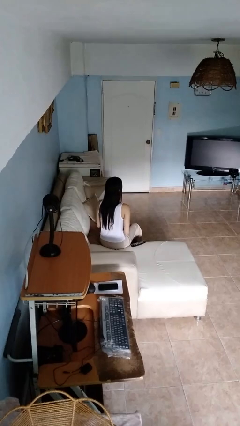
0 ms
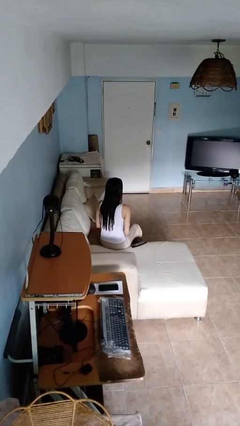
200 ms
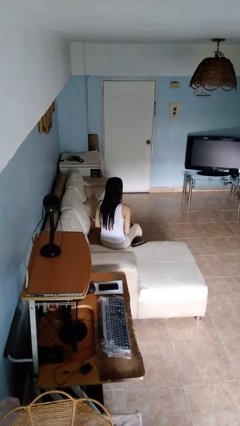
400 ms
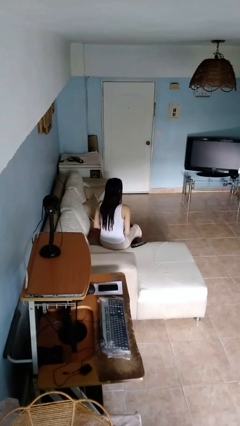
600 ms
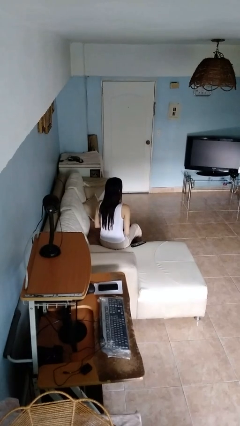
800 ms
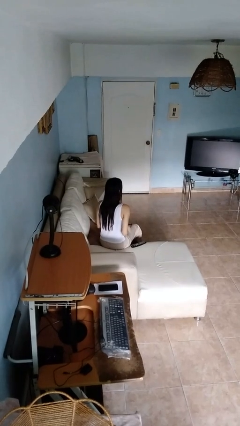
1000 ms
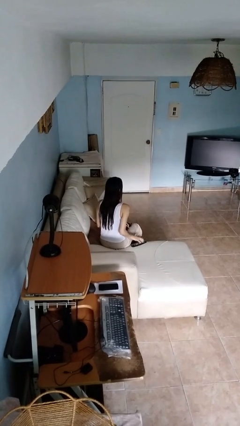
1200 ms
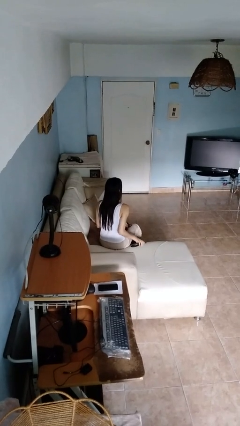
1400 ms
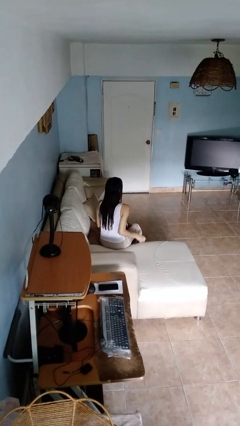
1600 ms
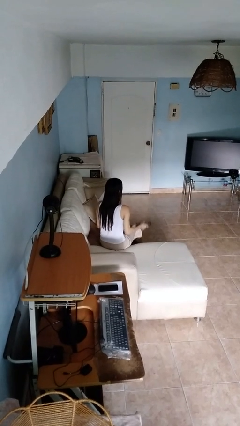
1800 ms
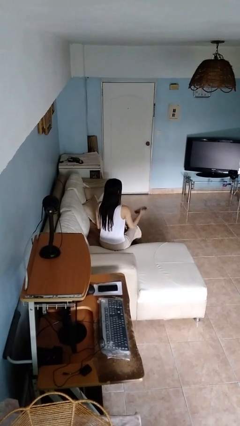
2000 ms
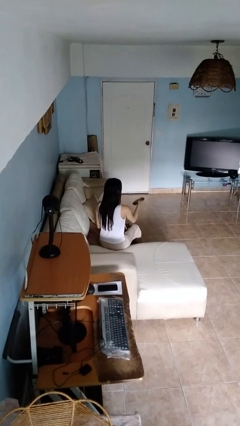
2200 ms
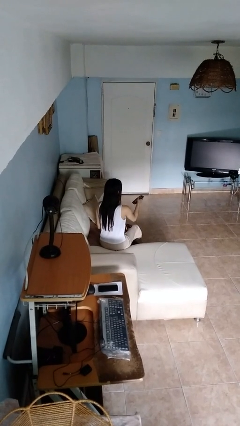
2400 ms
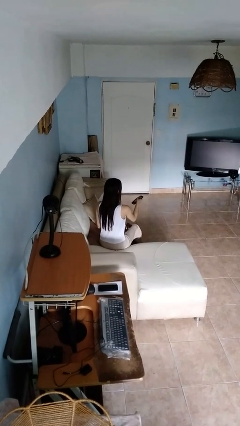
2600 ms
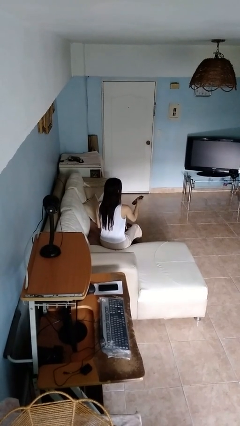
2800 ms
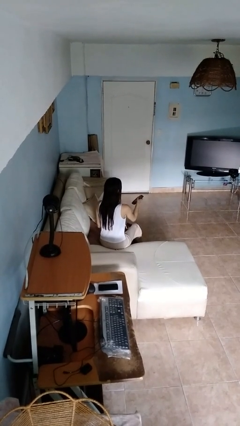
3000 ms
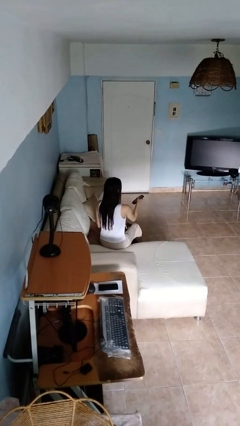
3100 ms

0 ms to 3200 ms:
person uses television remote

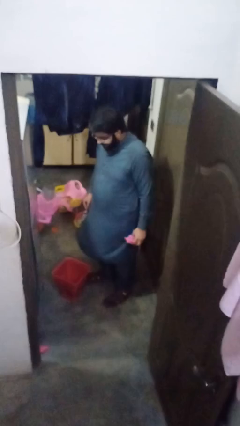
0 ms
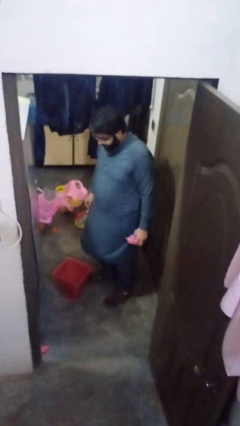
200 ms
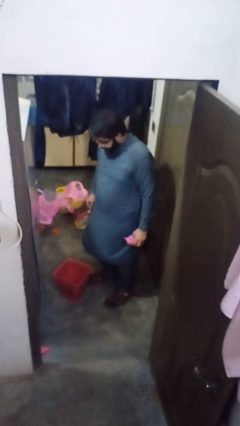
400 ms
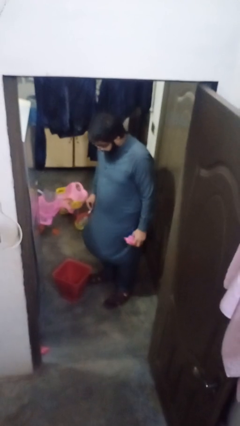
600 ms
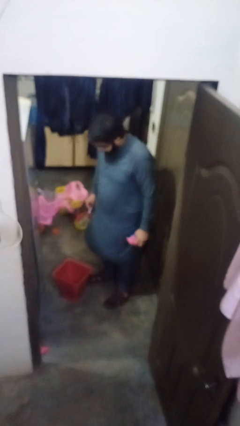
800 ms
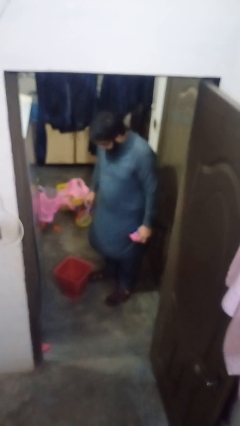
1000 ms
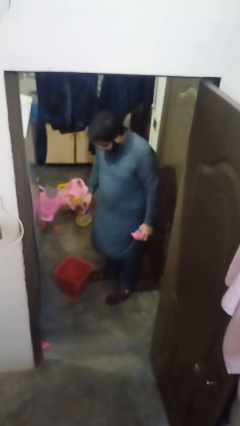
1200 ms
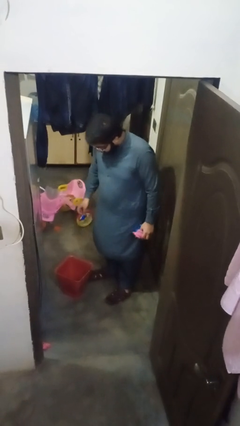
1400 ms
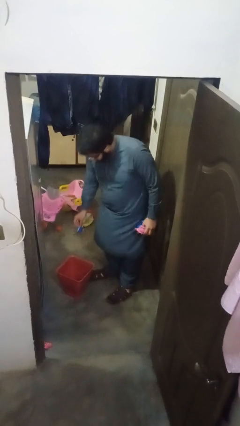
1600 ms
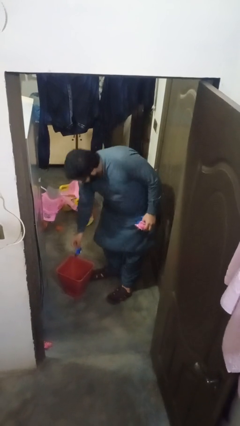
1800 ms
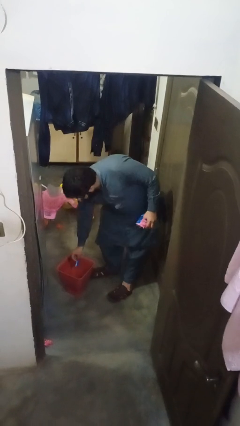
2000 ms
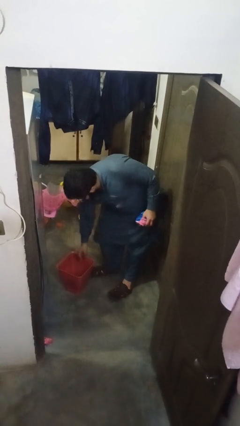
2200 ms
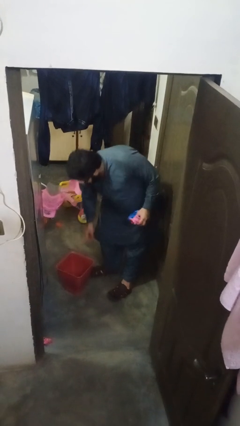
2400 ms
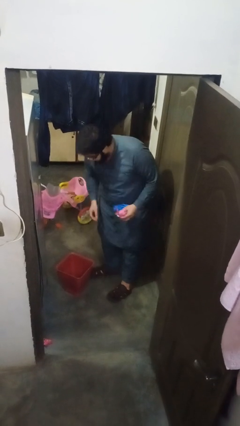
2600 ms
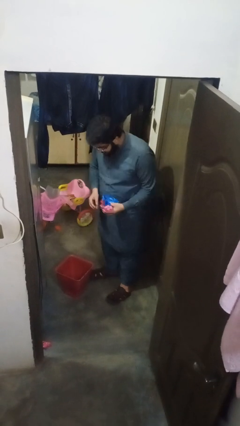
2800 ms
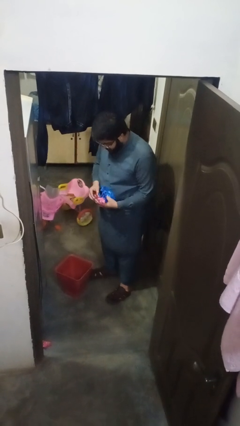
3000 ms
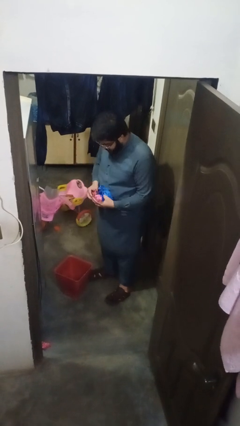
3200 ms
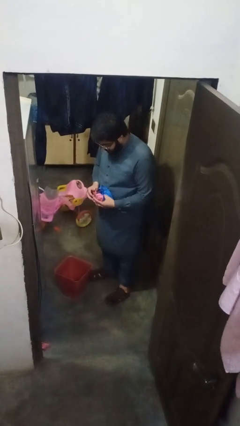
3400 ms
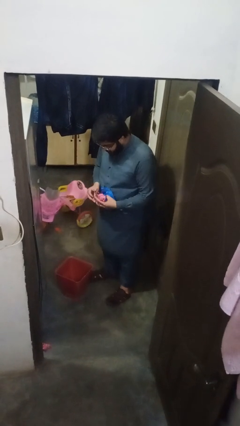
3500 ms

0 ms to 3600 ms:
person discards trash

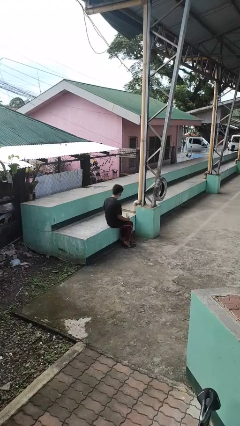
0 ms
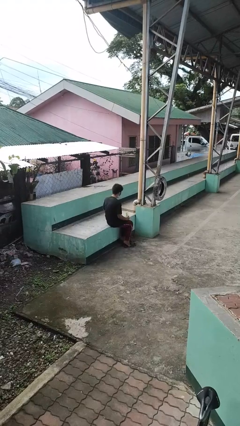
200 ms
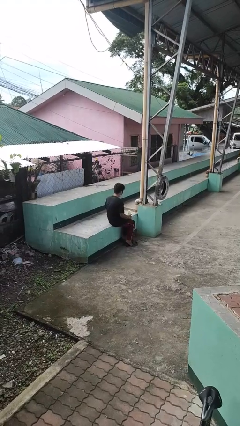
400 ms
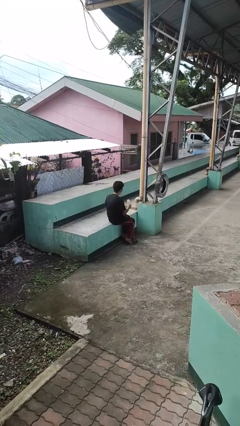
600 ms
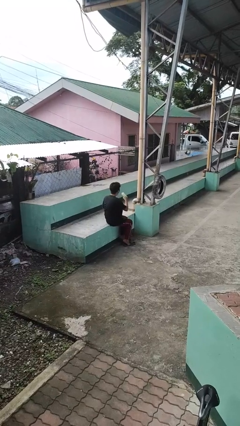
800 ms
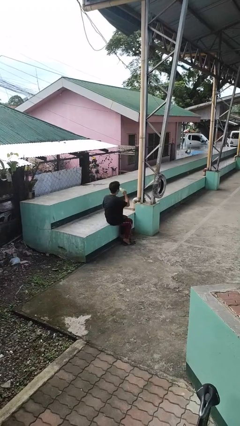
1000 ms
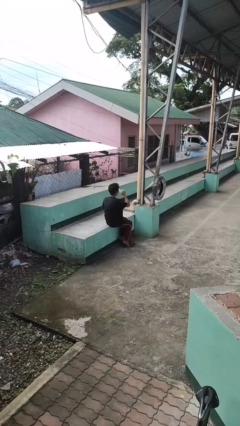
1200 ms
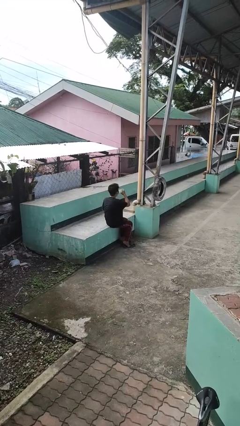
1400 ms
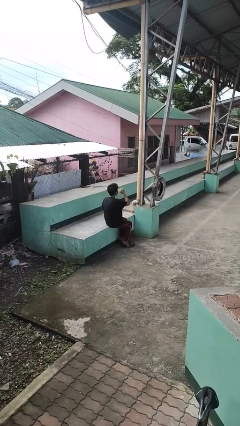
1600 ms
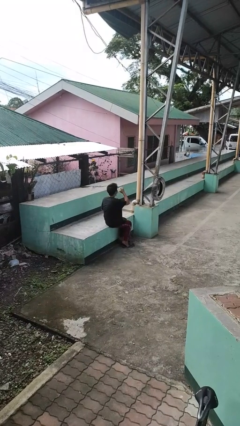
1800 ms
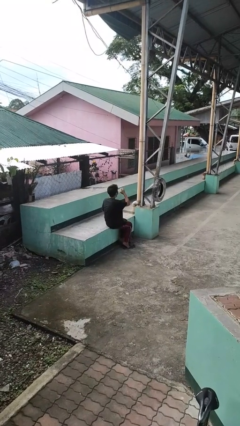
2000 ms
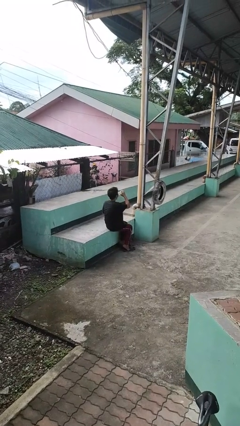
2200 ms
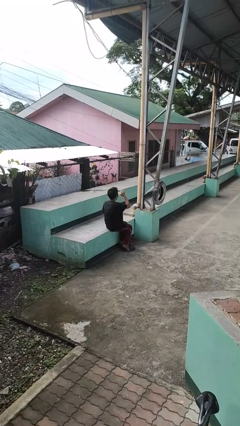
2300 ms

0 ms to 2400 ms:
person drinks from bottle

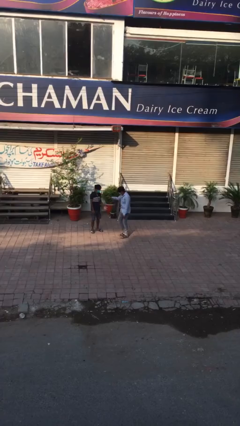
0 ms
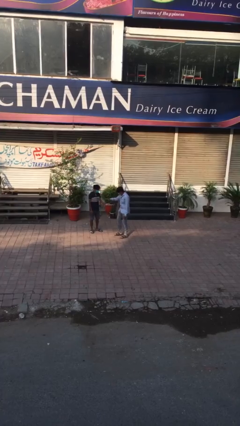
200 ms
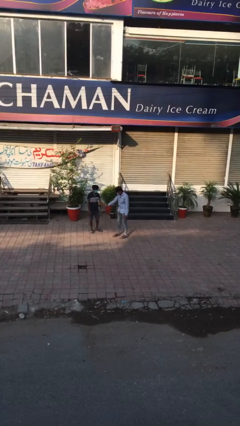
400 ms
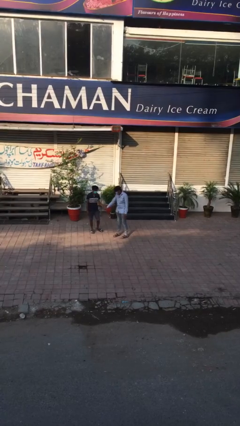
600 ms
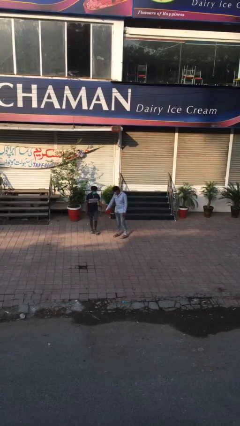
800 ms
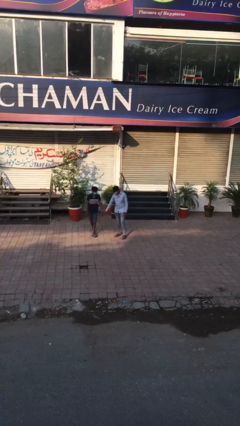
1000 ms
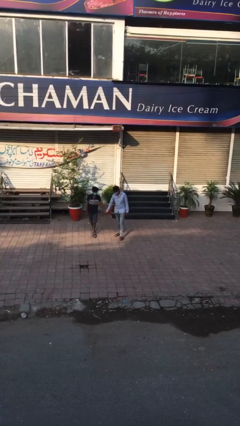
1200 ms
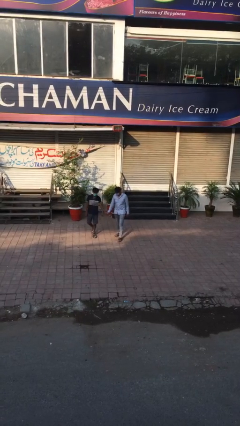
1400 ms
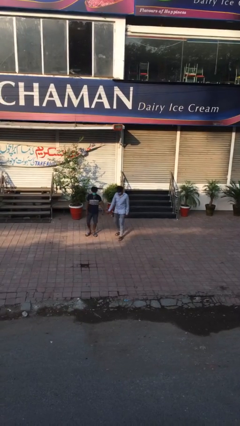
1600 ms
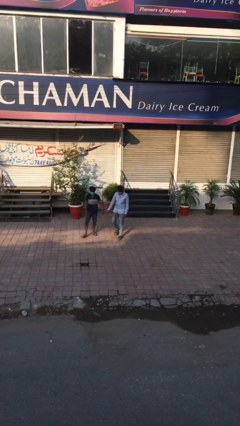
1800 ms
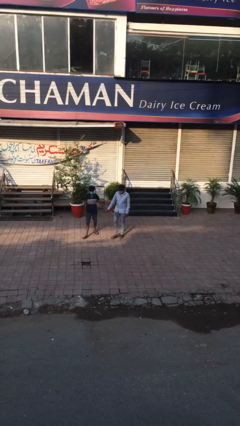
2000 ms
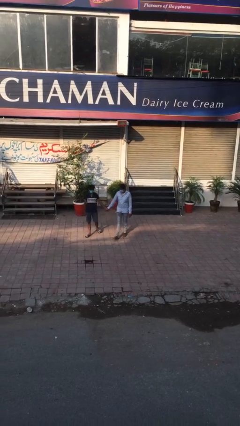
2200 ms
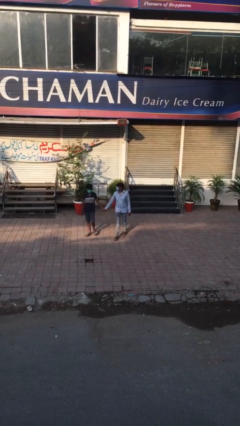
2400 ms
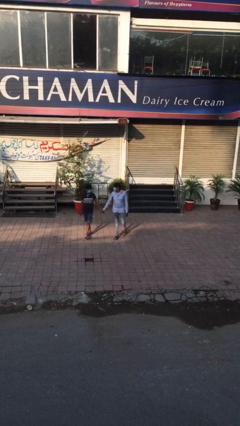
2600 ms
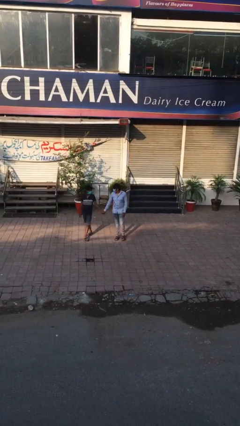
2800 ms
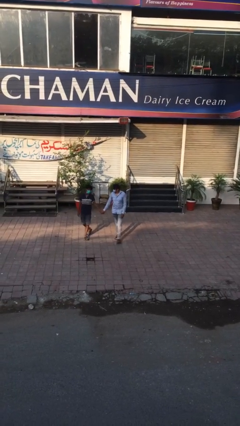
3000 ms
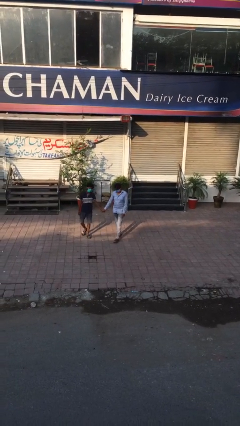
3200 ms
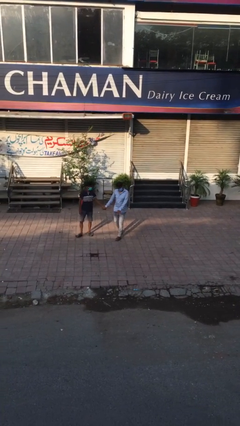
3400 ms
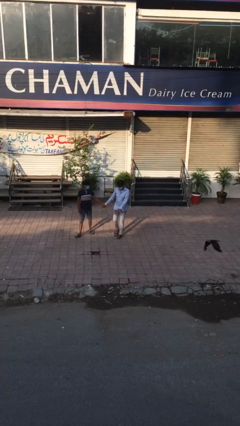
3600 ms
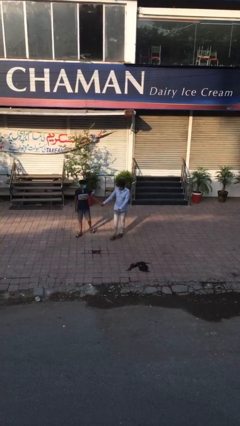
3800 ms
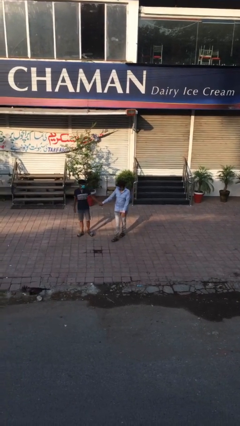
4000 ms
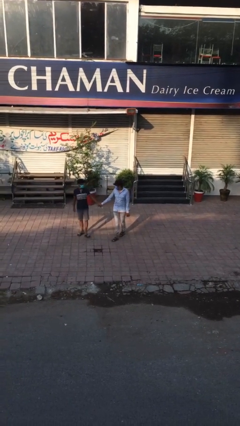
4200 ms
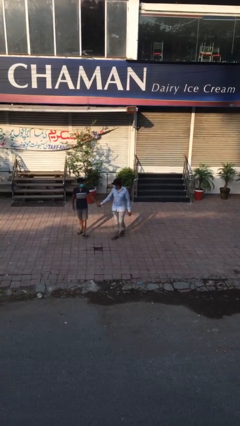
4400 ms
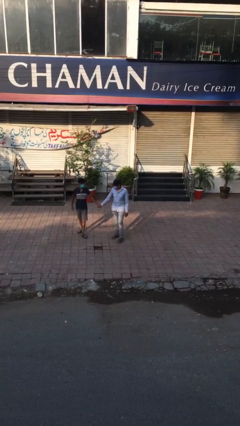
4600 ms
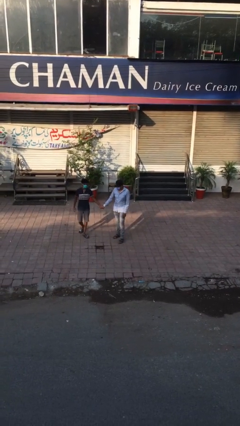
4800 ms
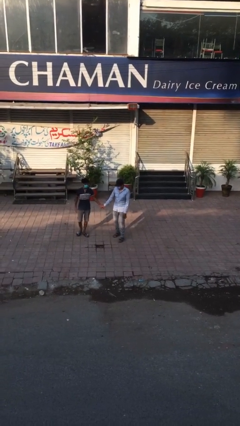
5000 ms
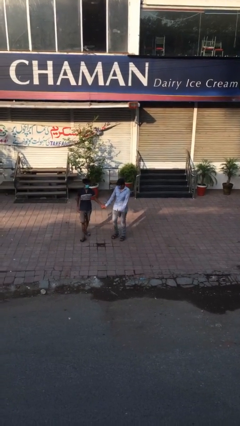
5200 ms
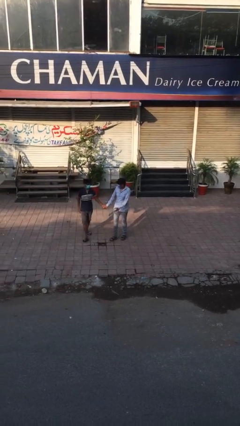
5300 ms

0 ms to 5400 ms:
person holds hand

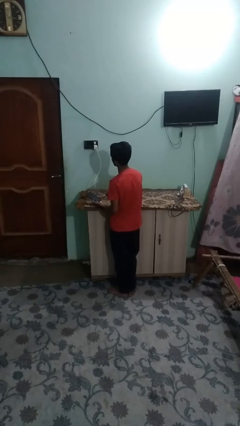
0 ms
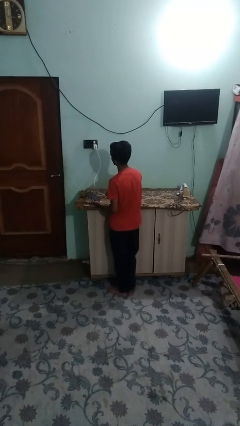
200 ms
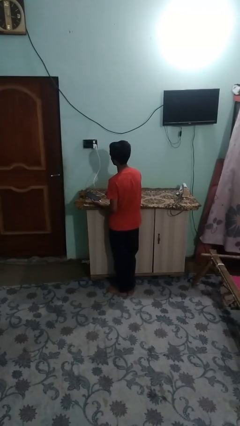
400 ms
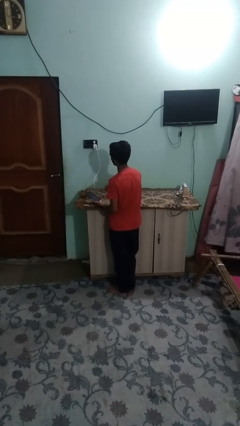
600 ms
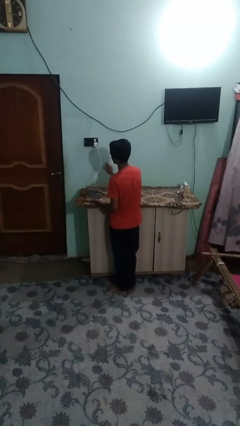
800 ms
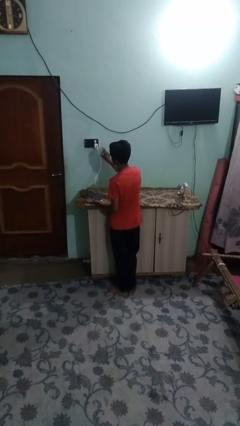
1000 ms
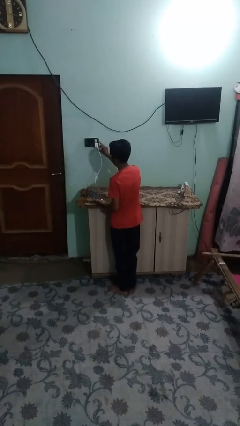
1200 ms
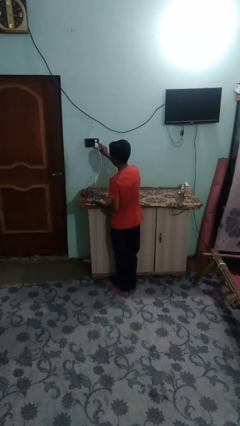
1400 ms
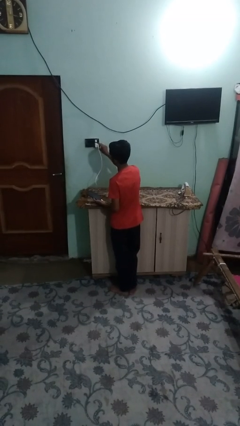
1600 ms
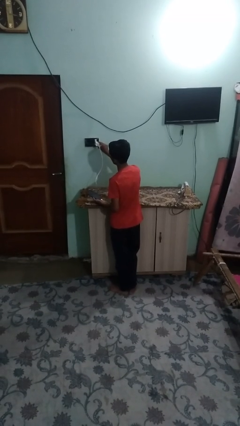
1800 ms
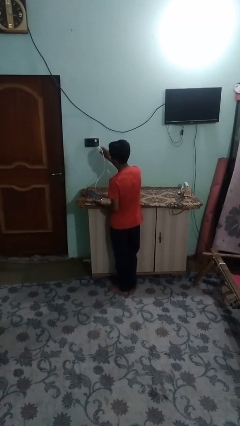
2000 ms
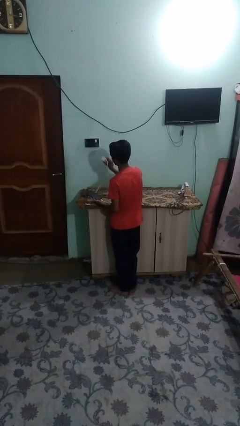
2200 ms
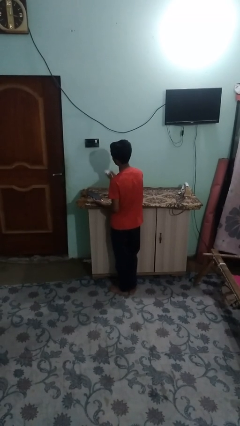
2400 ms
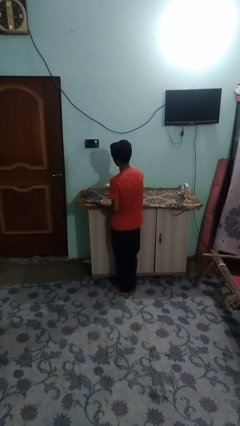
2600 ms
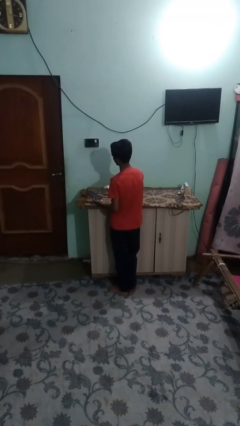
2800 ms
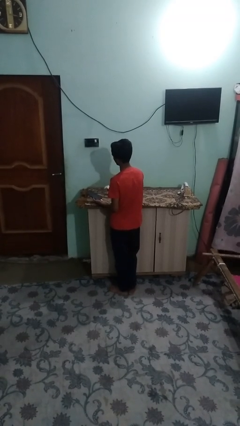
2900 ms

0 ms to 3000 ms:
person unplugs from electrical socket
